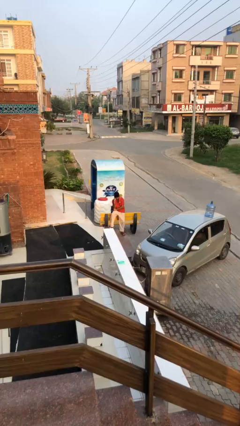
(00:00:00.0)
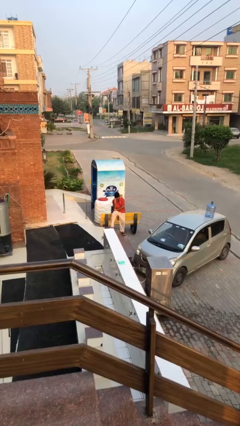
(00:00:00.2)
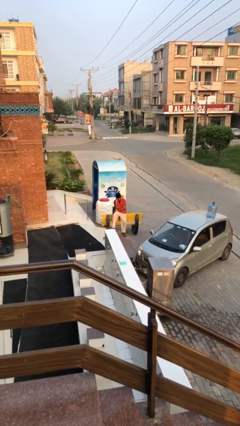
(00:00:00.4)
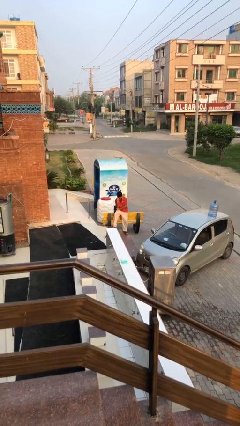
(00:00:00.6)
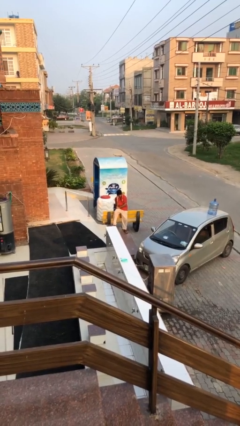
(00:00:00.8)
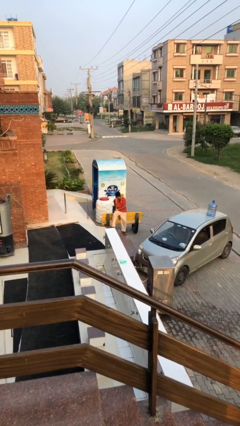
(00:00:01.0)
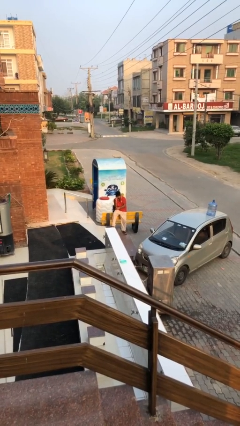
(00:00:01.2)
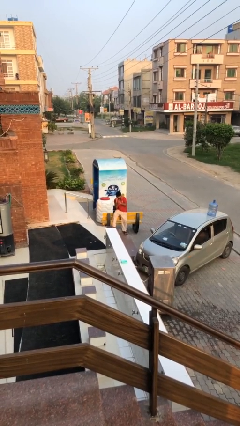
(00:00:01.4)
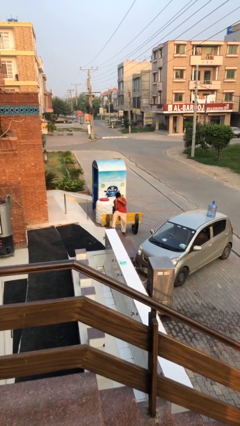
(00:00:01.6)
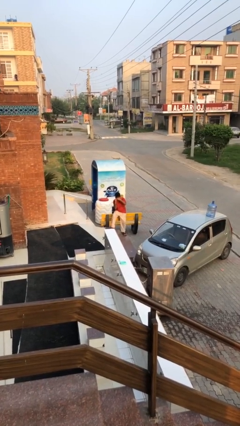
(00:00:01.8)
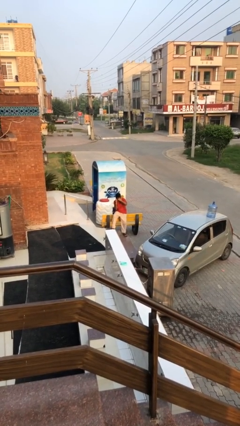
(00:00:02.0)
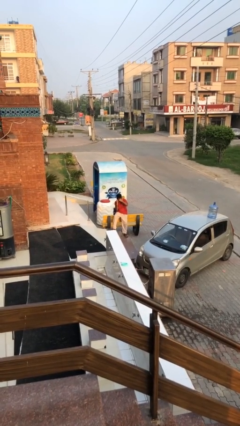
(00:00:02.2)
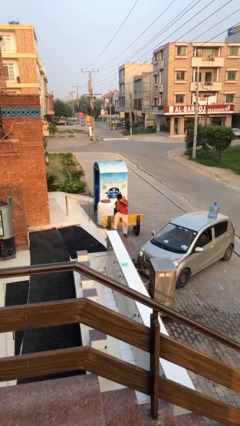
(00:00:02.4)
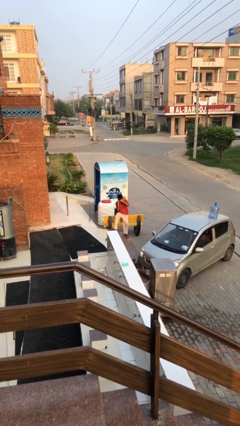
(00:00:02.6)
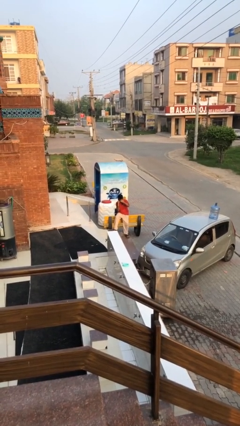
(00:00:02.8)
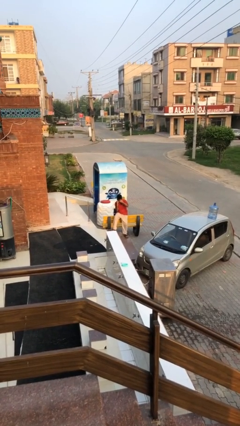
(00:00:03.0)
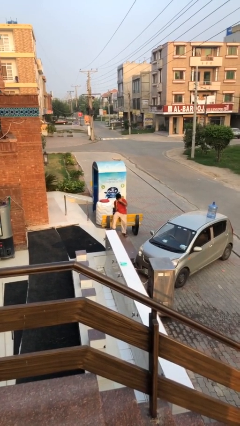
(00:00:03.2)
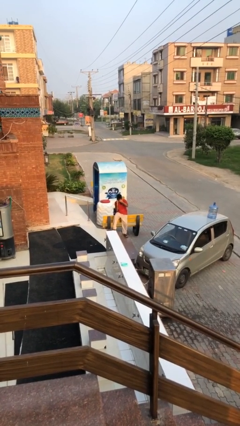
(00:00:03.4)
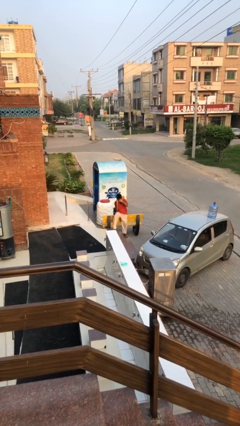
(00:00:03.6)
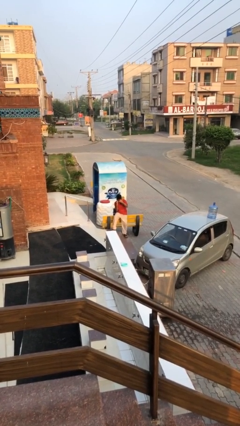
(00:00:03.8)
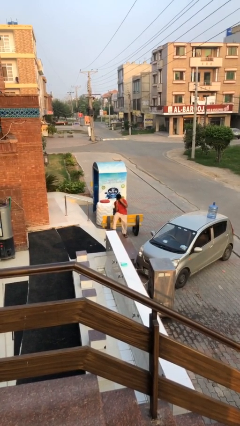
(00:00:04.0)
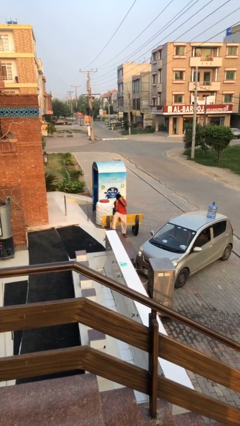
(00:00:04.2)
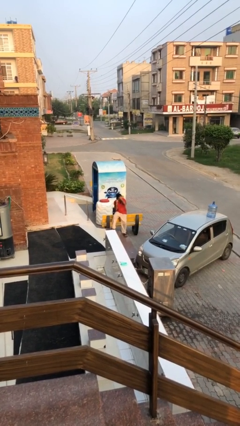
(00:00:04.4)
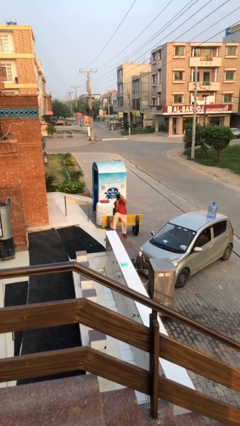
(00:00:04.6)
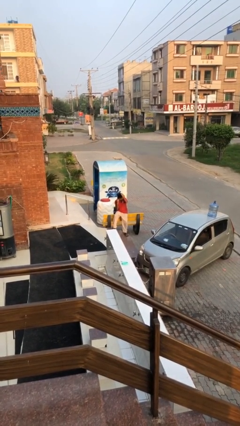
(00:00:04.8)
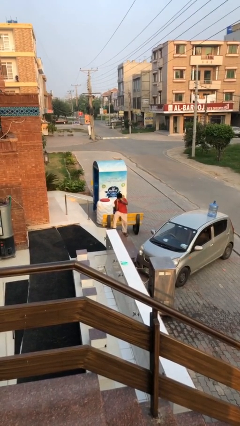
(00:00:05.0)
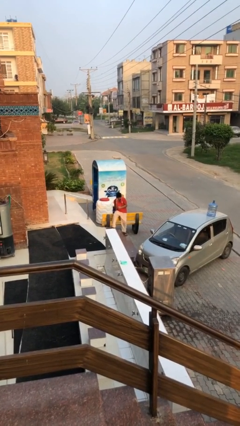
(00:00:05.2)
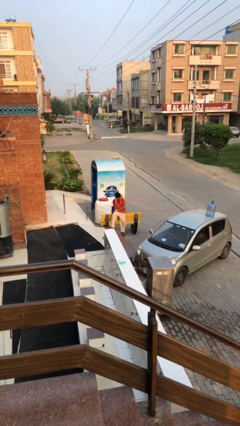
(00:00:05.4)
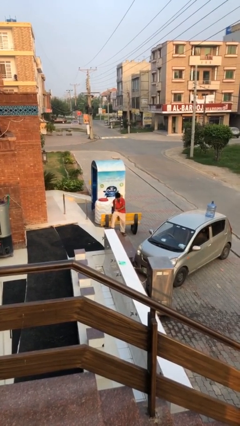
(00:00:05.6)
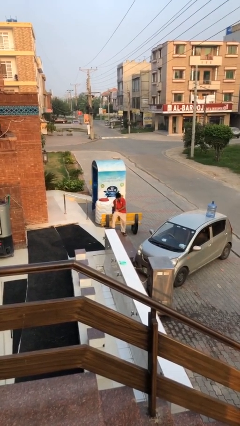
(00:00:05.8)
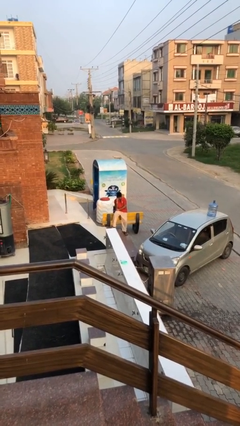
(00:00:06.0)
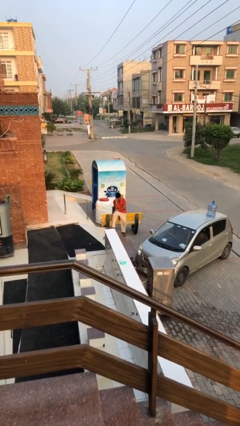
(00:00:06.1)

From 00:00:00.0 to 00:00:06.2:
person talks on phone

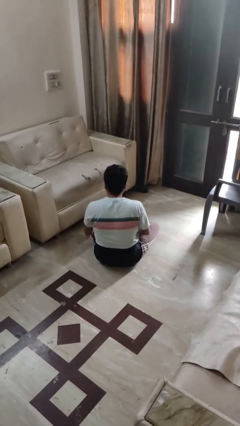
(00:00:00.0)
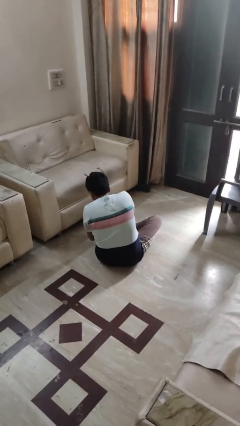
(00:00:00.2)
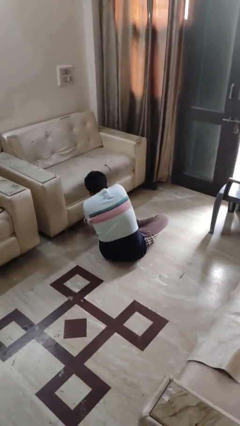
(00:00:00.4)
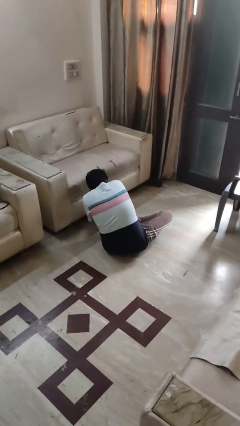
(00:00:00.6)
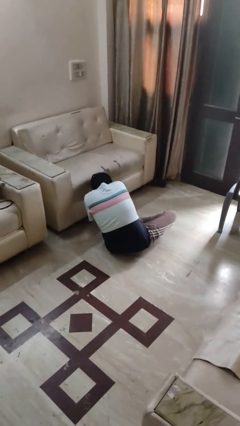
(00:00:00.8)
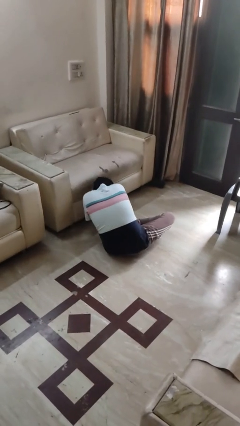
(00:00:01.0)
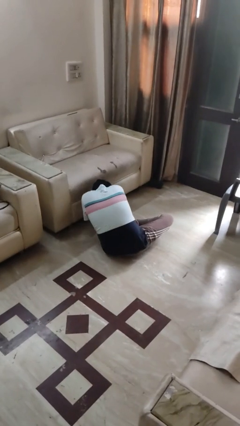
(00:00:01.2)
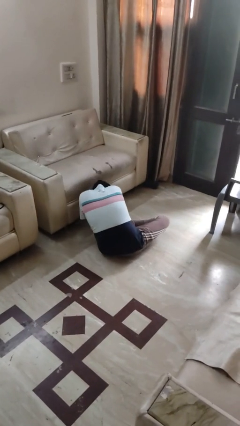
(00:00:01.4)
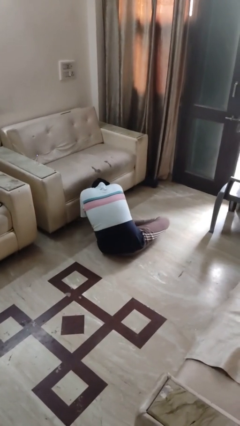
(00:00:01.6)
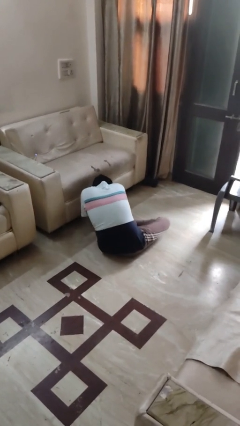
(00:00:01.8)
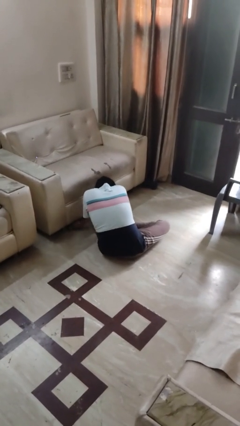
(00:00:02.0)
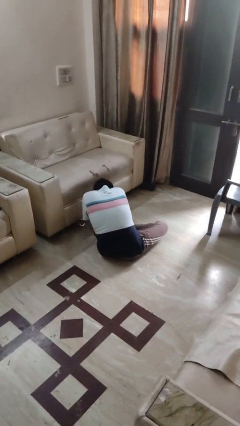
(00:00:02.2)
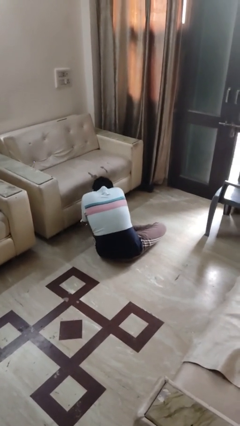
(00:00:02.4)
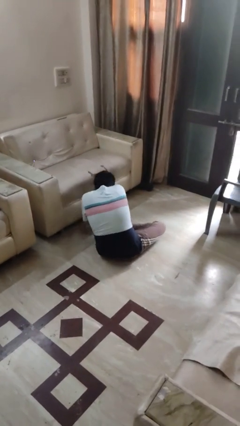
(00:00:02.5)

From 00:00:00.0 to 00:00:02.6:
person searches under couch

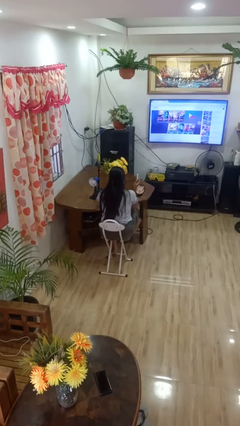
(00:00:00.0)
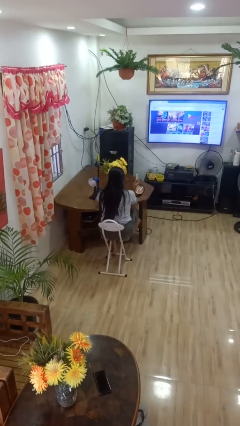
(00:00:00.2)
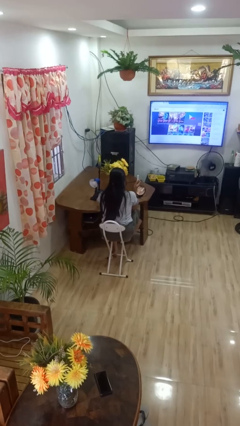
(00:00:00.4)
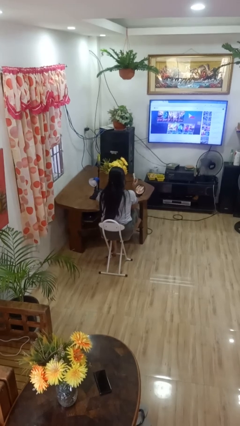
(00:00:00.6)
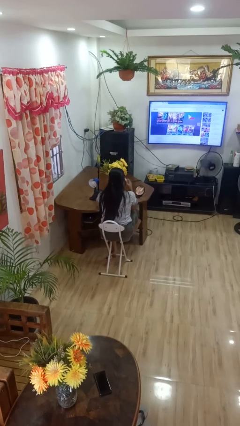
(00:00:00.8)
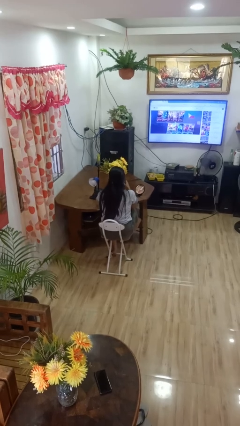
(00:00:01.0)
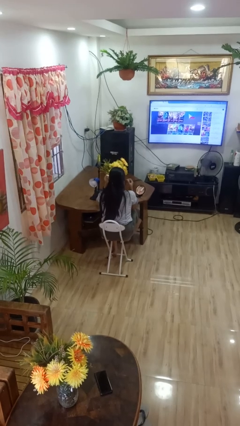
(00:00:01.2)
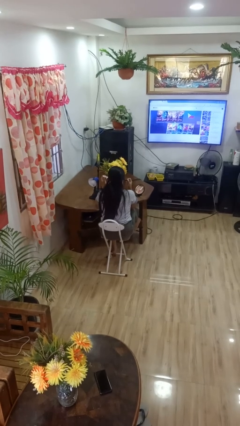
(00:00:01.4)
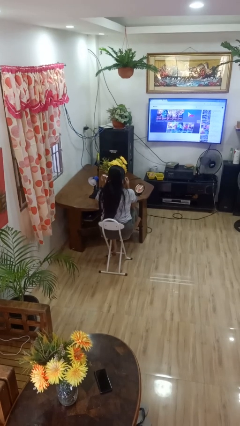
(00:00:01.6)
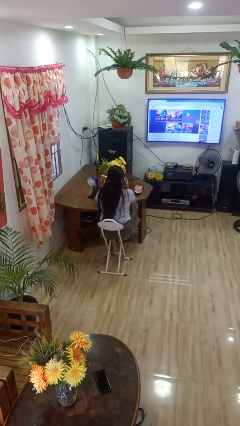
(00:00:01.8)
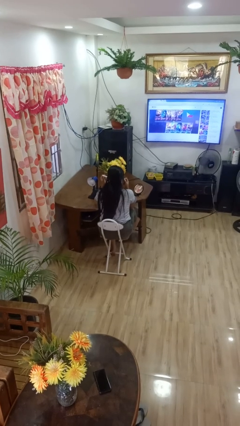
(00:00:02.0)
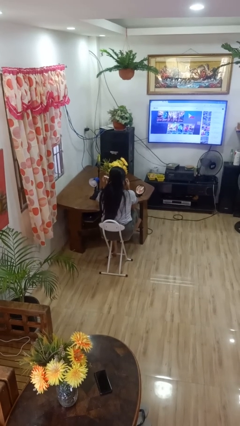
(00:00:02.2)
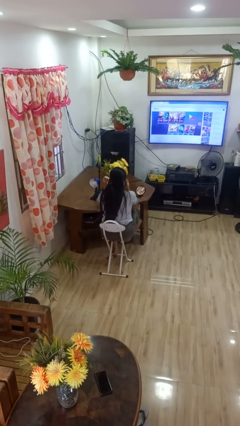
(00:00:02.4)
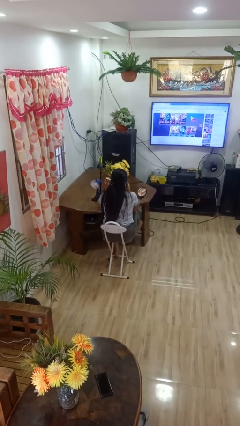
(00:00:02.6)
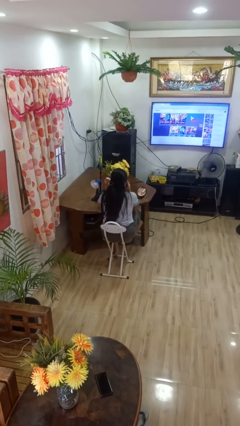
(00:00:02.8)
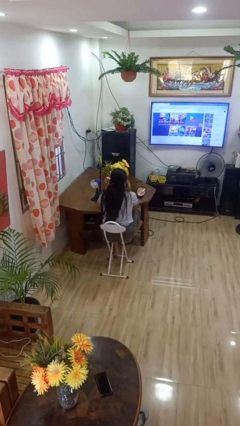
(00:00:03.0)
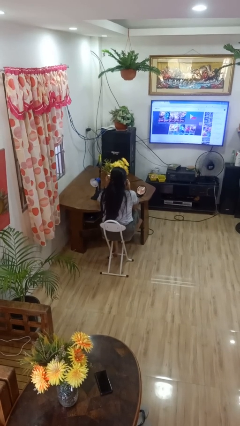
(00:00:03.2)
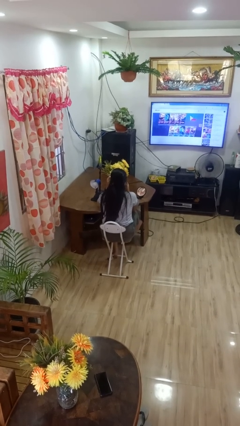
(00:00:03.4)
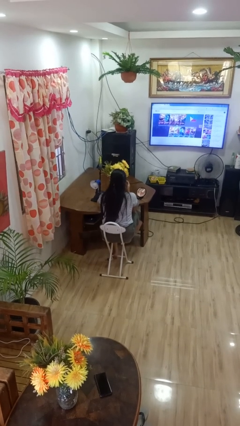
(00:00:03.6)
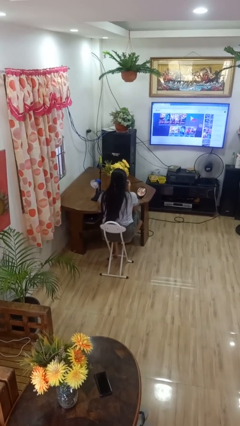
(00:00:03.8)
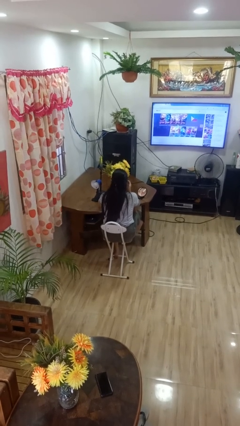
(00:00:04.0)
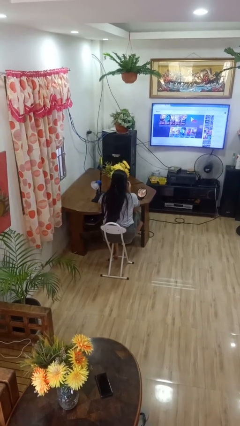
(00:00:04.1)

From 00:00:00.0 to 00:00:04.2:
person applies lip makeup

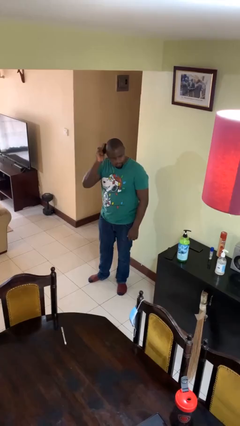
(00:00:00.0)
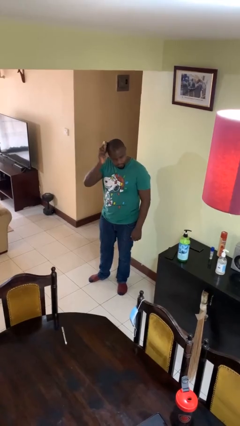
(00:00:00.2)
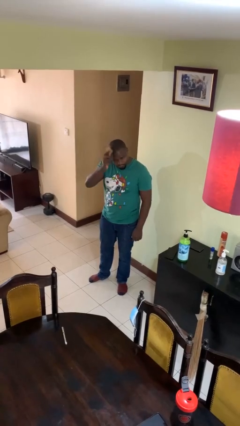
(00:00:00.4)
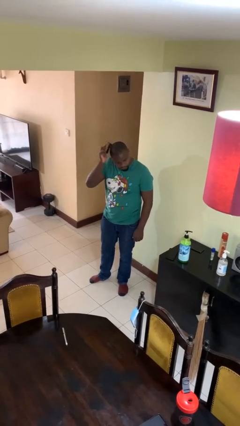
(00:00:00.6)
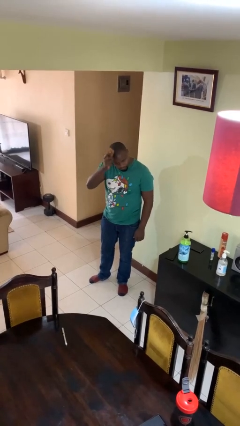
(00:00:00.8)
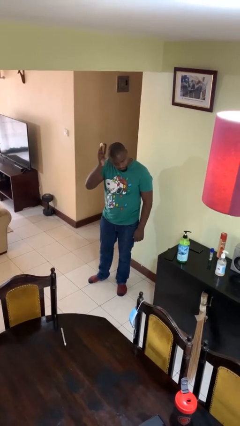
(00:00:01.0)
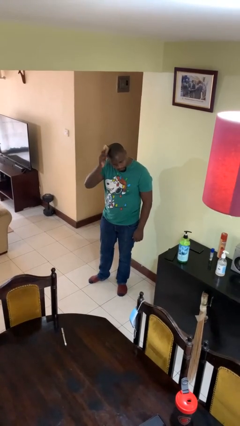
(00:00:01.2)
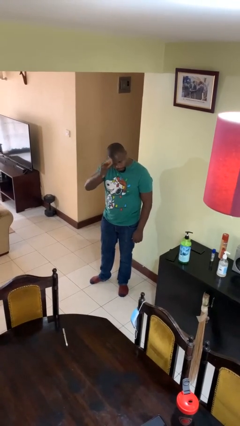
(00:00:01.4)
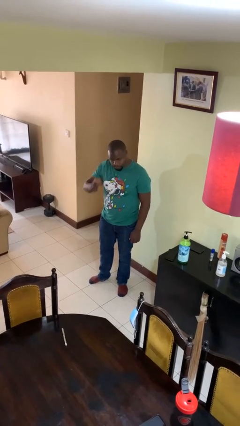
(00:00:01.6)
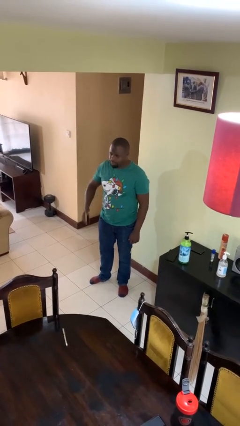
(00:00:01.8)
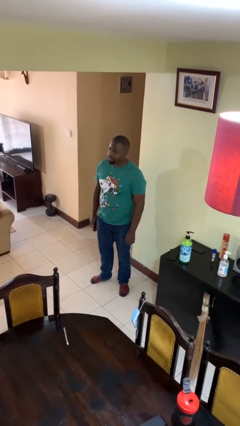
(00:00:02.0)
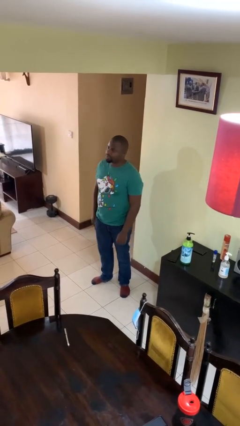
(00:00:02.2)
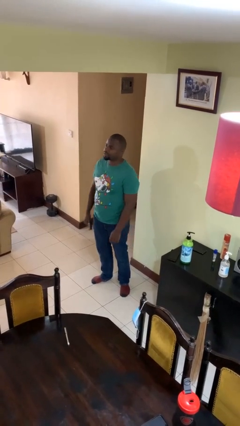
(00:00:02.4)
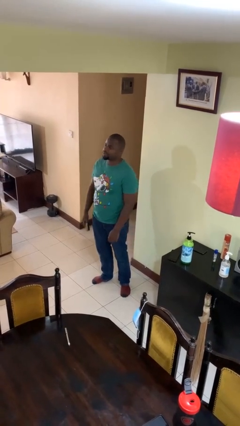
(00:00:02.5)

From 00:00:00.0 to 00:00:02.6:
person brushes hair

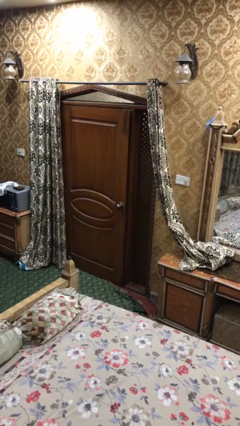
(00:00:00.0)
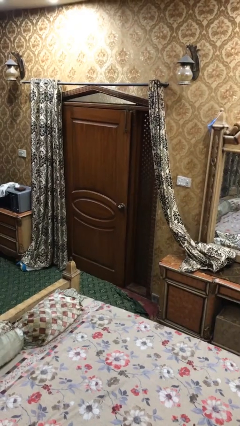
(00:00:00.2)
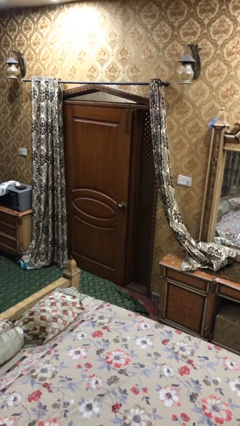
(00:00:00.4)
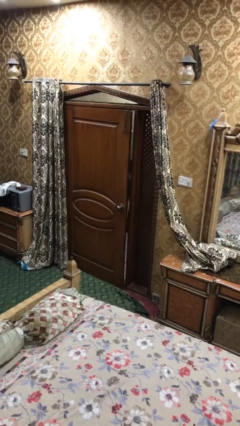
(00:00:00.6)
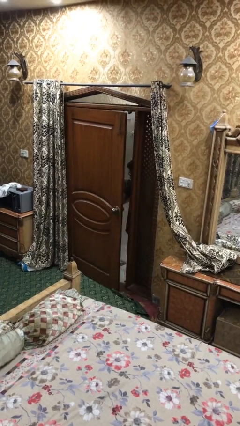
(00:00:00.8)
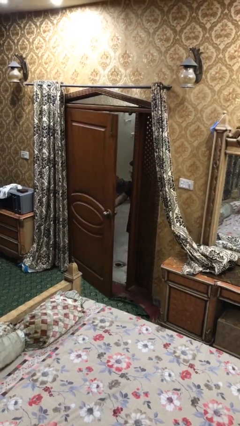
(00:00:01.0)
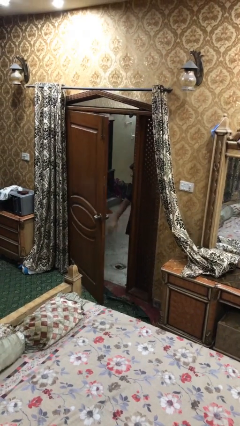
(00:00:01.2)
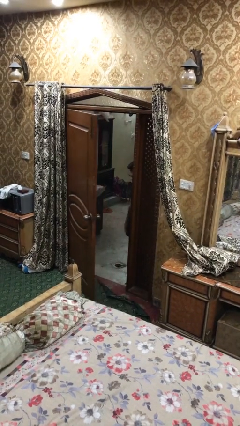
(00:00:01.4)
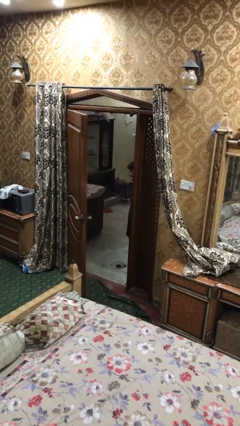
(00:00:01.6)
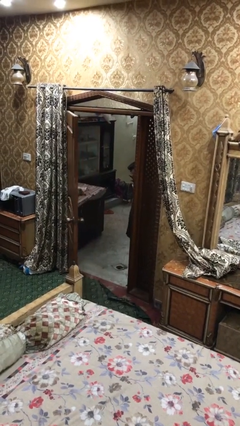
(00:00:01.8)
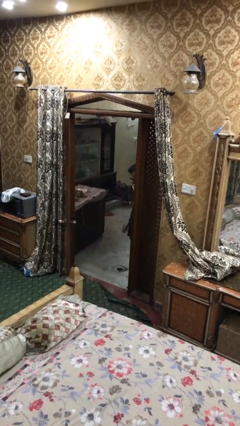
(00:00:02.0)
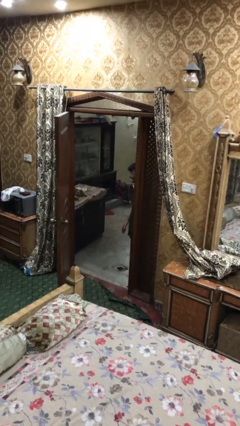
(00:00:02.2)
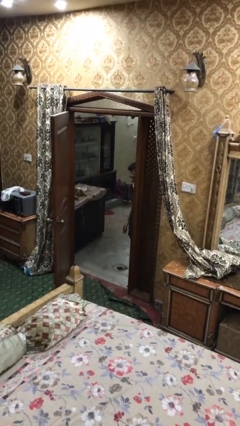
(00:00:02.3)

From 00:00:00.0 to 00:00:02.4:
person opens facility door
